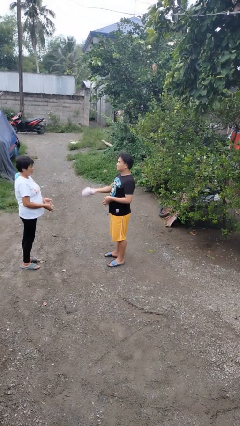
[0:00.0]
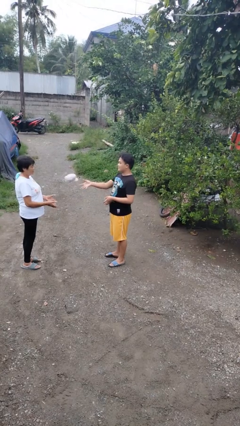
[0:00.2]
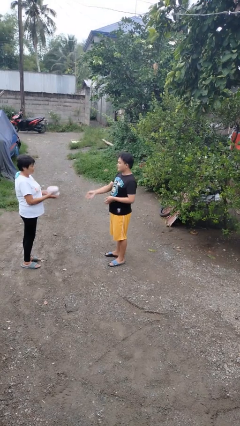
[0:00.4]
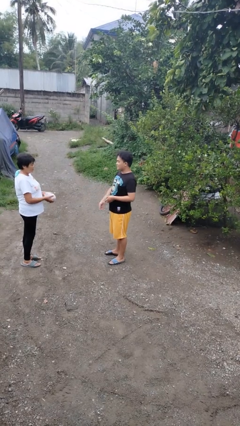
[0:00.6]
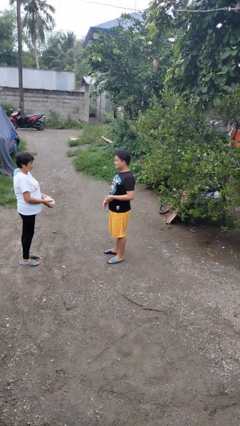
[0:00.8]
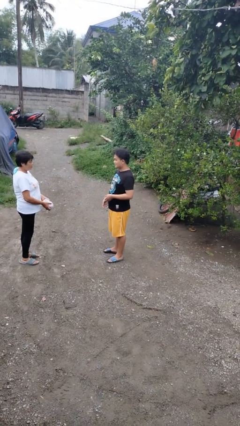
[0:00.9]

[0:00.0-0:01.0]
person throws object to person

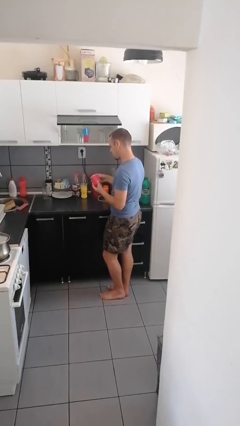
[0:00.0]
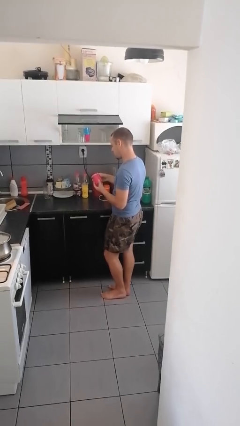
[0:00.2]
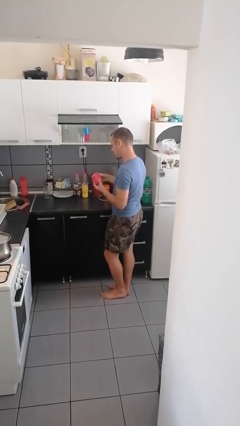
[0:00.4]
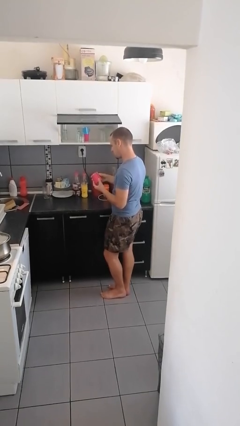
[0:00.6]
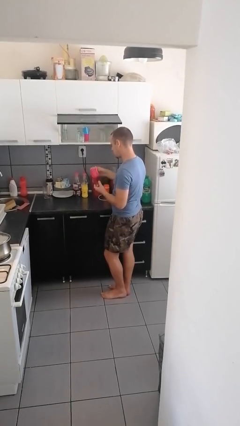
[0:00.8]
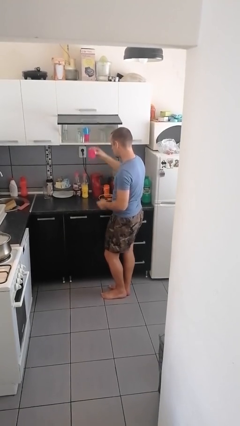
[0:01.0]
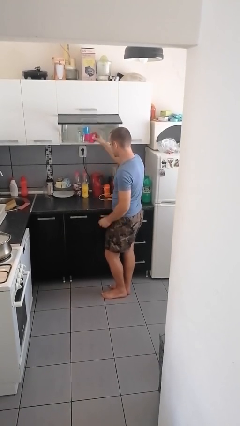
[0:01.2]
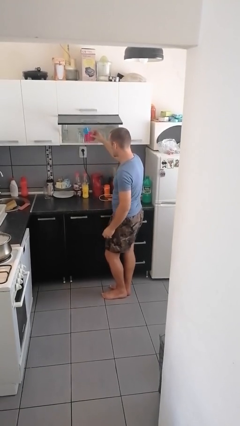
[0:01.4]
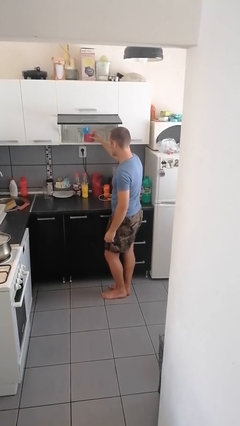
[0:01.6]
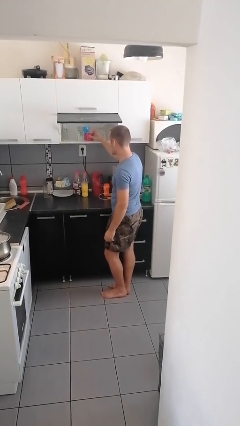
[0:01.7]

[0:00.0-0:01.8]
person puts down object into cabinet

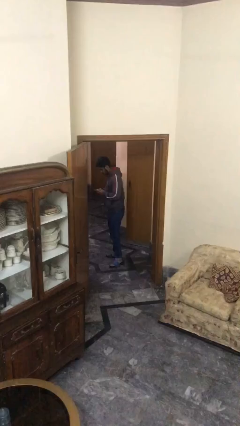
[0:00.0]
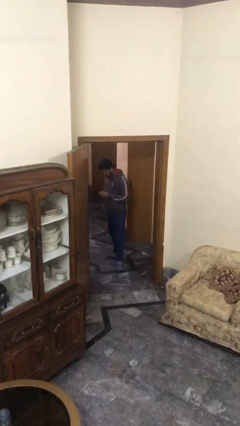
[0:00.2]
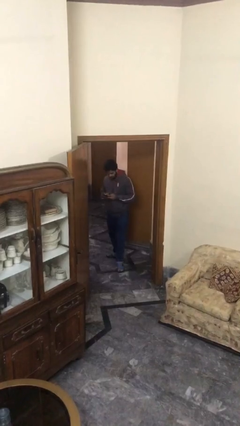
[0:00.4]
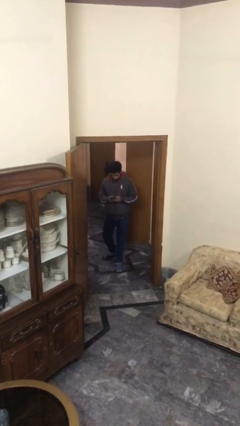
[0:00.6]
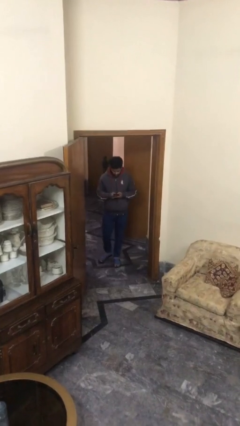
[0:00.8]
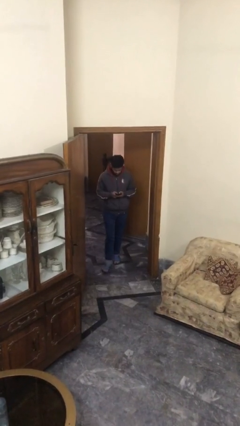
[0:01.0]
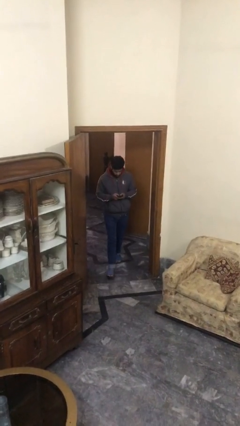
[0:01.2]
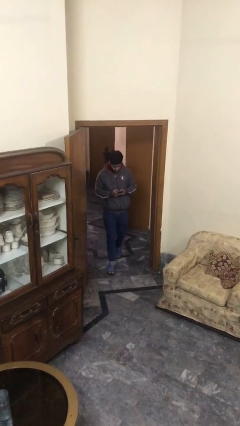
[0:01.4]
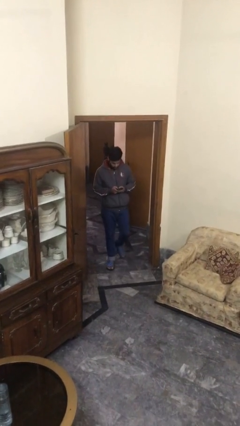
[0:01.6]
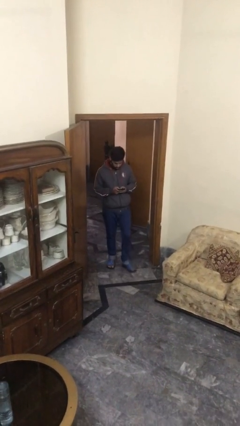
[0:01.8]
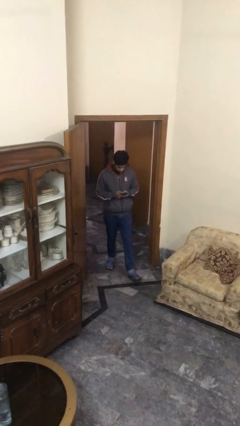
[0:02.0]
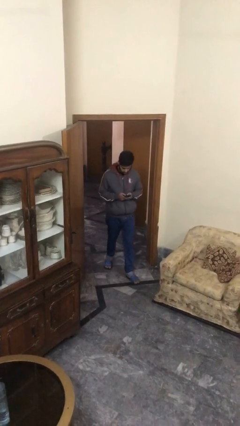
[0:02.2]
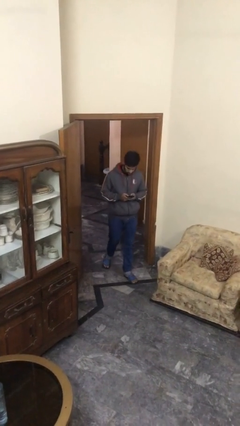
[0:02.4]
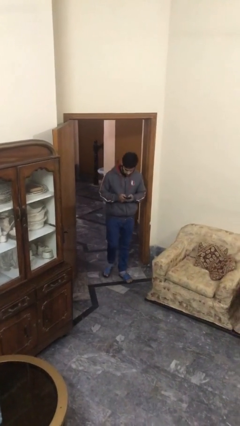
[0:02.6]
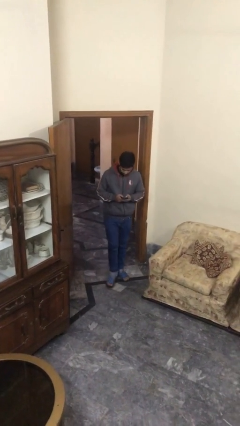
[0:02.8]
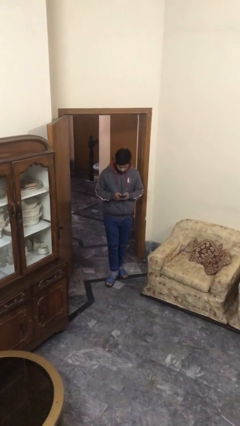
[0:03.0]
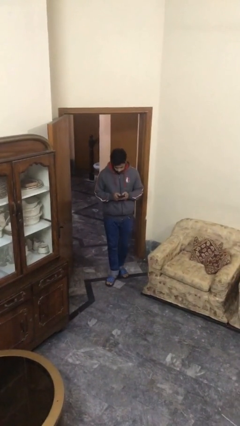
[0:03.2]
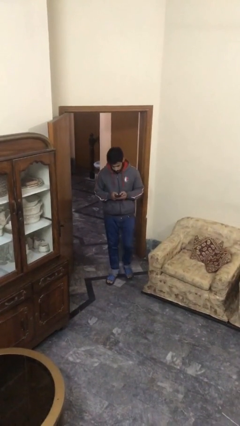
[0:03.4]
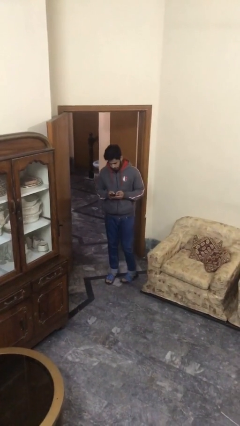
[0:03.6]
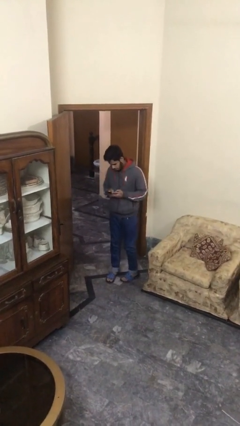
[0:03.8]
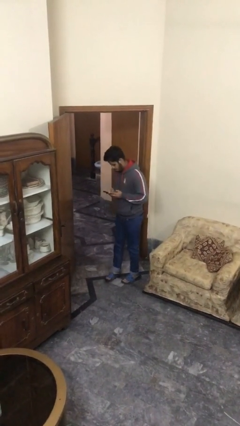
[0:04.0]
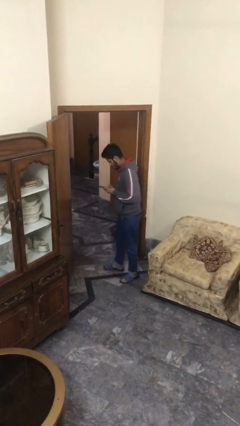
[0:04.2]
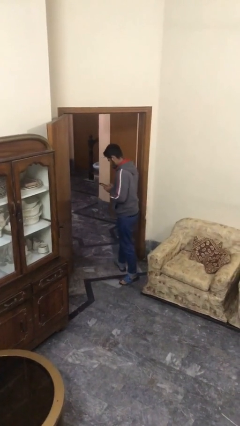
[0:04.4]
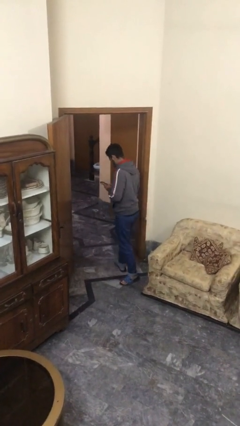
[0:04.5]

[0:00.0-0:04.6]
person enters scene through structure

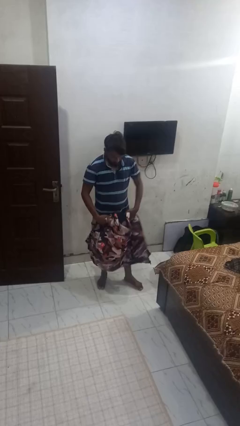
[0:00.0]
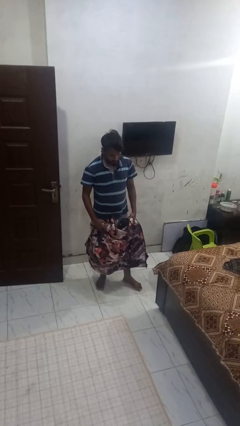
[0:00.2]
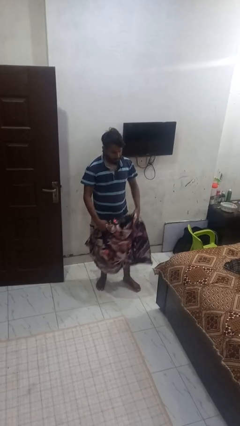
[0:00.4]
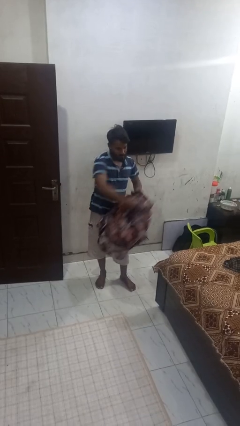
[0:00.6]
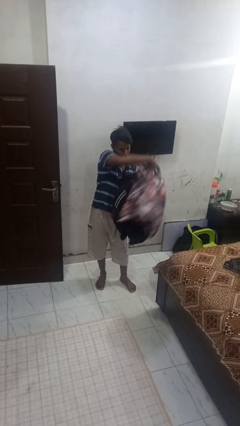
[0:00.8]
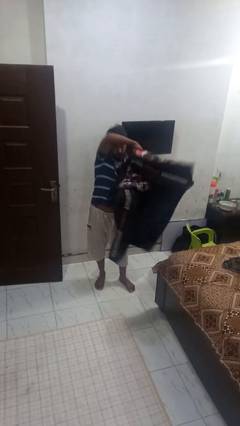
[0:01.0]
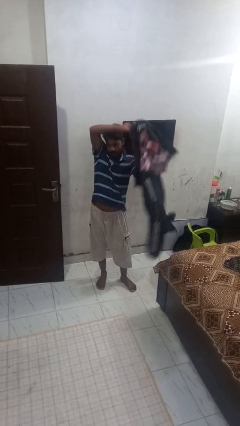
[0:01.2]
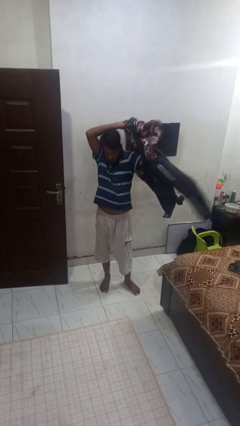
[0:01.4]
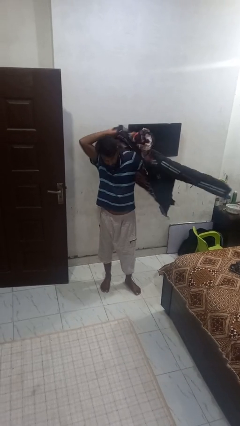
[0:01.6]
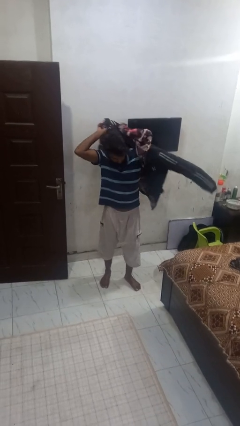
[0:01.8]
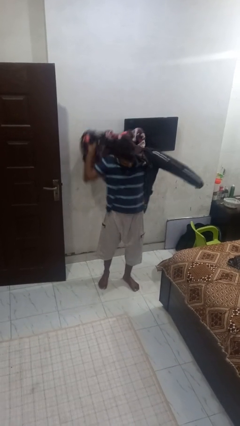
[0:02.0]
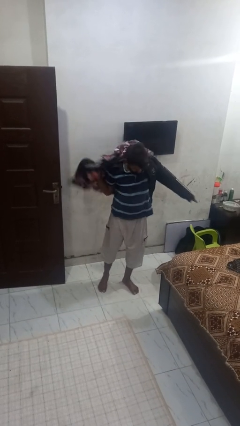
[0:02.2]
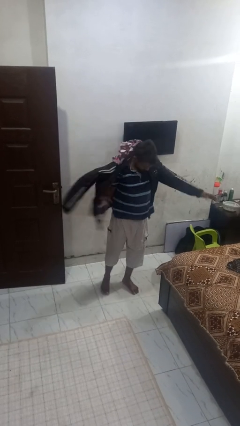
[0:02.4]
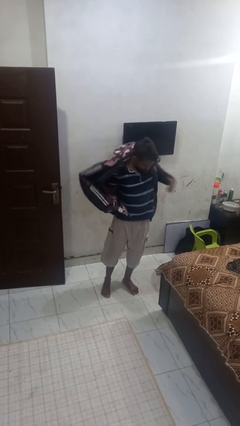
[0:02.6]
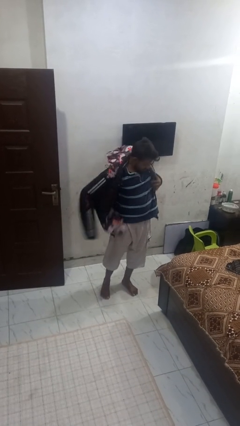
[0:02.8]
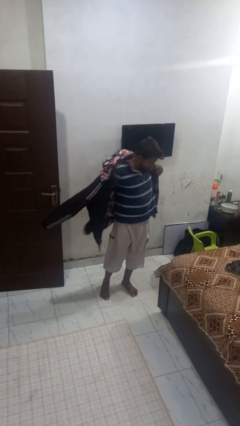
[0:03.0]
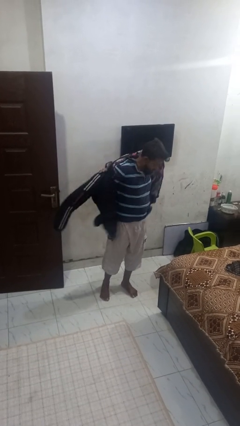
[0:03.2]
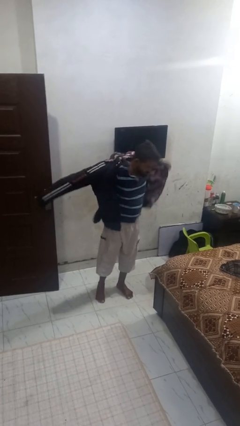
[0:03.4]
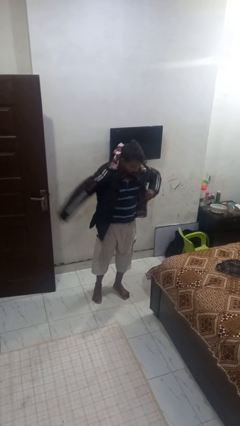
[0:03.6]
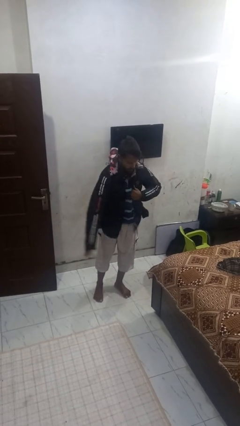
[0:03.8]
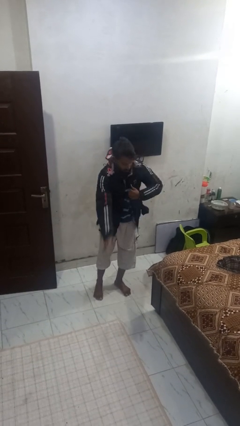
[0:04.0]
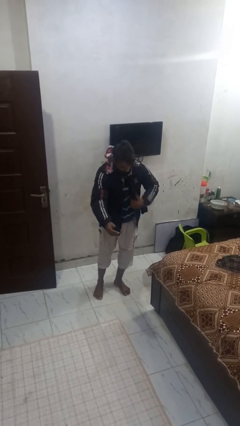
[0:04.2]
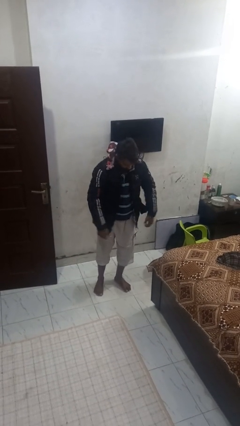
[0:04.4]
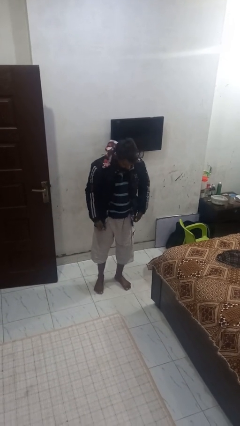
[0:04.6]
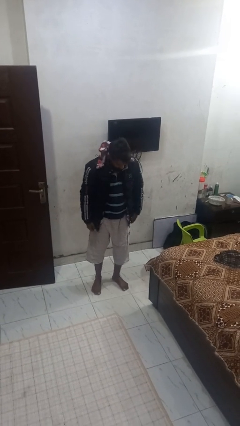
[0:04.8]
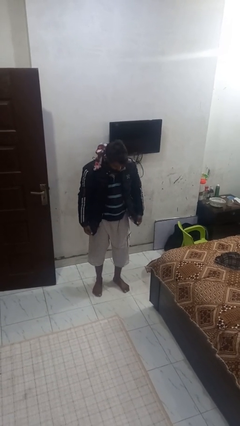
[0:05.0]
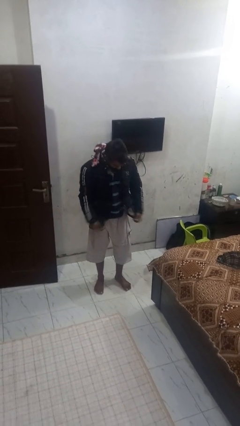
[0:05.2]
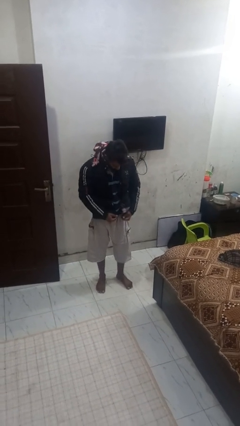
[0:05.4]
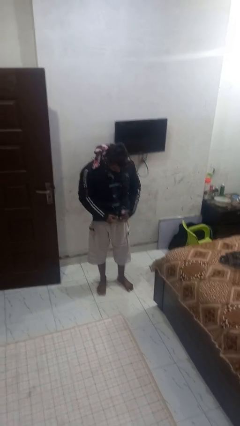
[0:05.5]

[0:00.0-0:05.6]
person puts on jacket

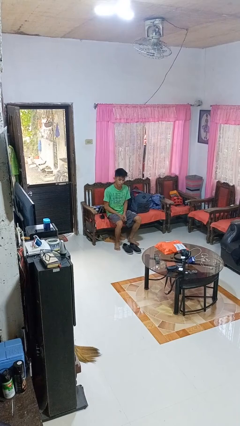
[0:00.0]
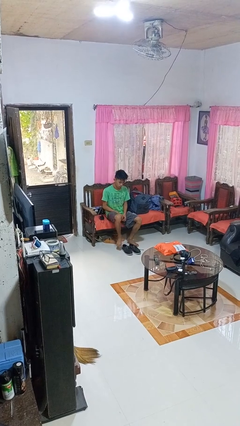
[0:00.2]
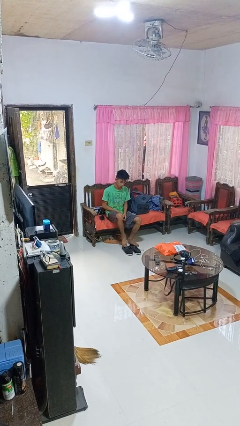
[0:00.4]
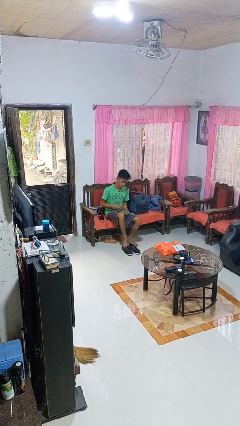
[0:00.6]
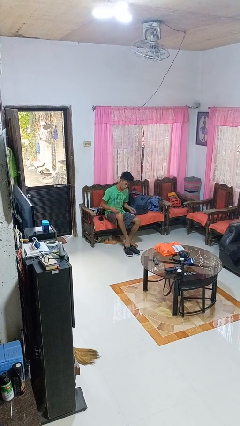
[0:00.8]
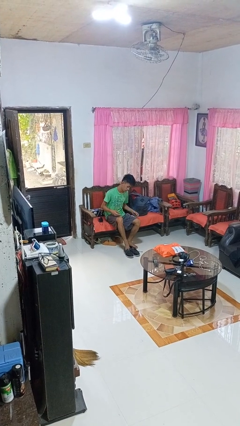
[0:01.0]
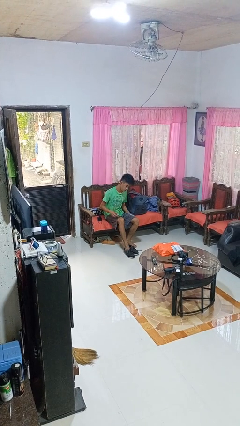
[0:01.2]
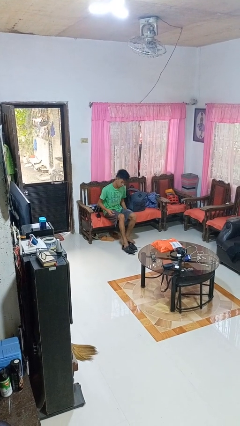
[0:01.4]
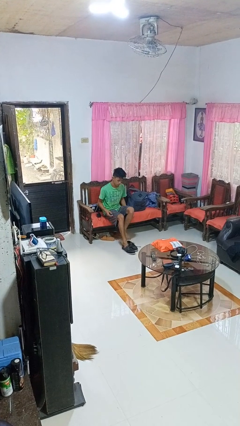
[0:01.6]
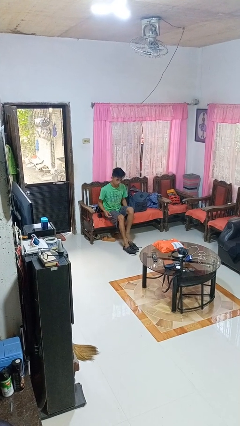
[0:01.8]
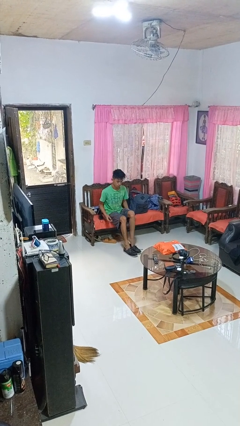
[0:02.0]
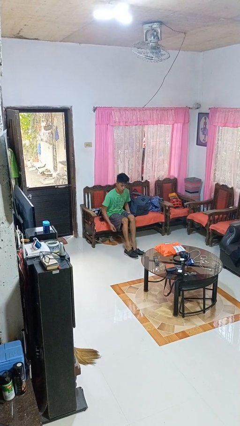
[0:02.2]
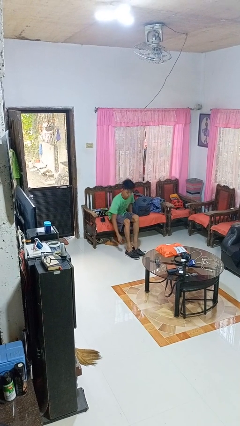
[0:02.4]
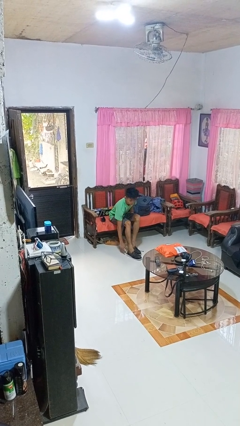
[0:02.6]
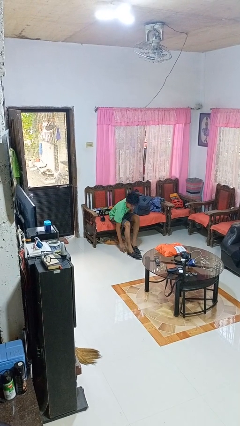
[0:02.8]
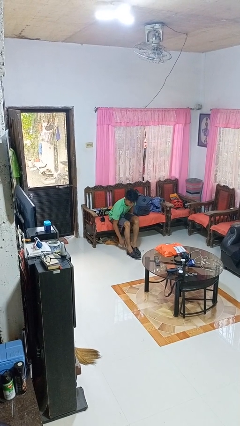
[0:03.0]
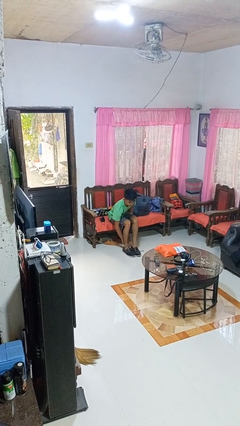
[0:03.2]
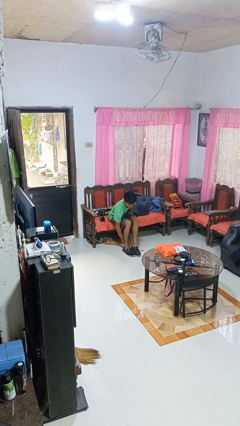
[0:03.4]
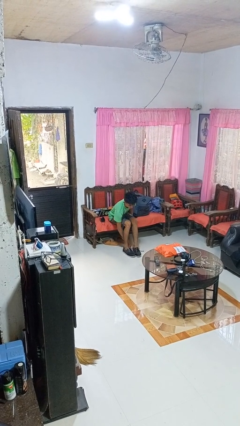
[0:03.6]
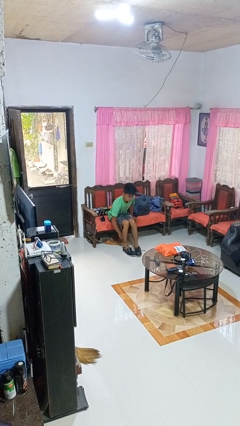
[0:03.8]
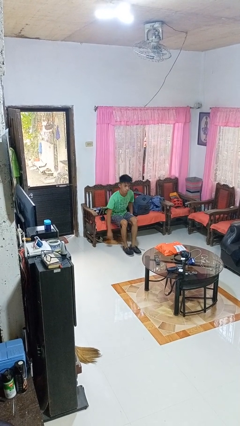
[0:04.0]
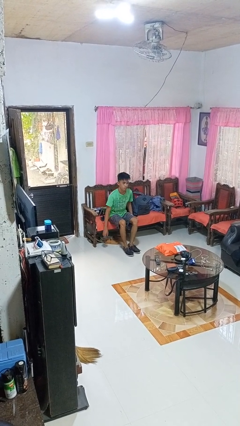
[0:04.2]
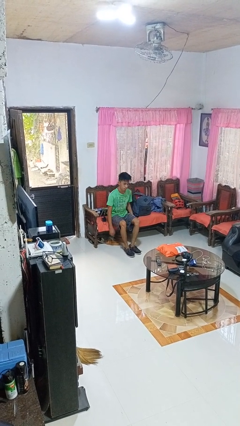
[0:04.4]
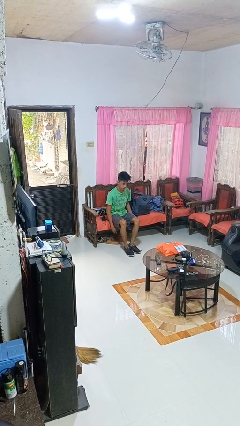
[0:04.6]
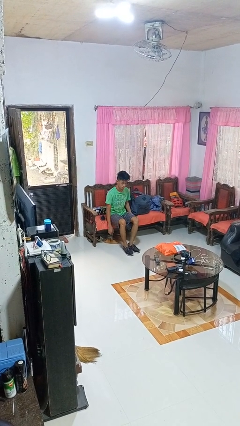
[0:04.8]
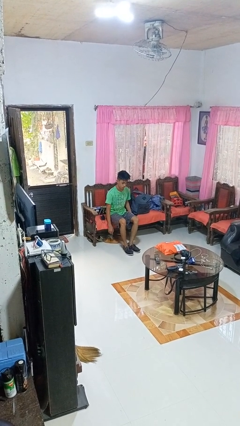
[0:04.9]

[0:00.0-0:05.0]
person puts on shoes
